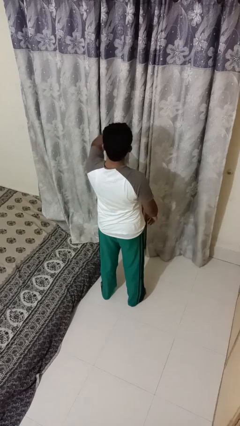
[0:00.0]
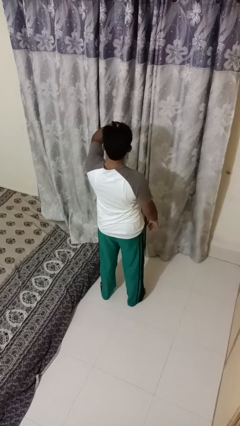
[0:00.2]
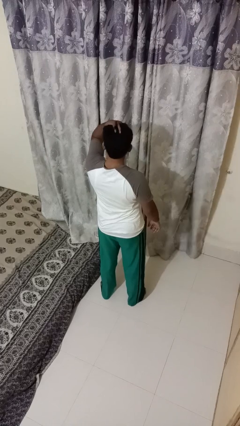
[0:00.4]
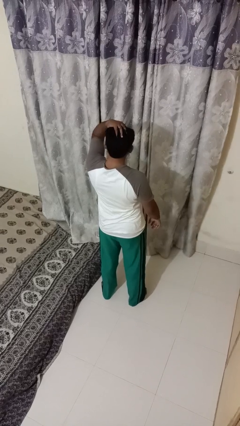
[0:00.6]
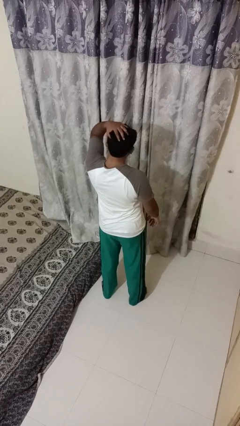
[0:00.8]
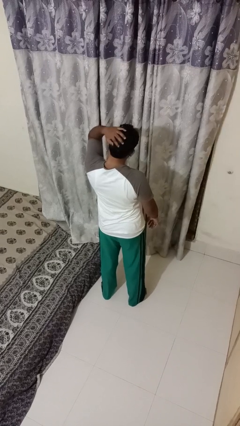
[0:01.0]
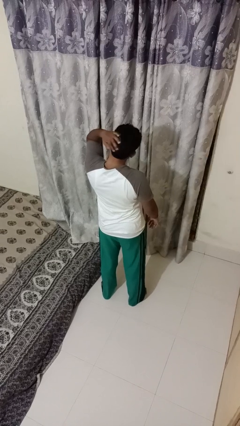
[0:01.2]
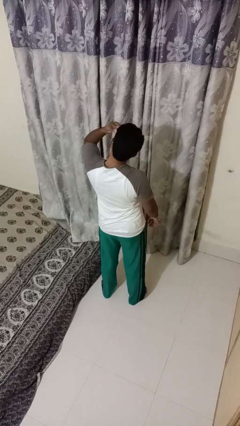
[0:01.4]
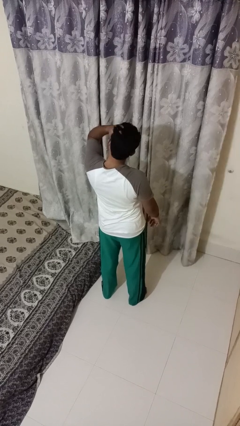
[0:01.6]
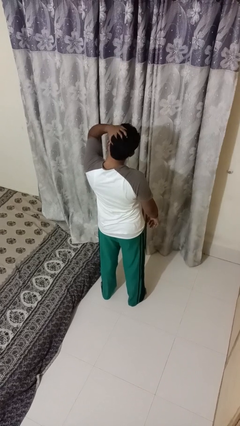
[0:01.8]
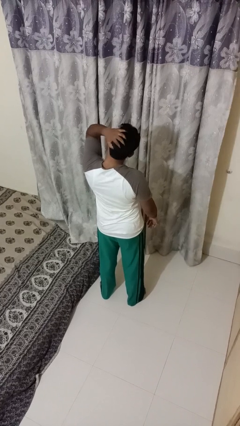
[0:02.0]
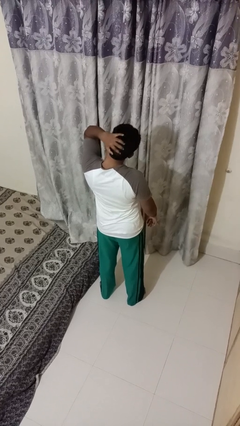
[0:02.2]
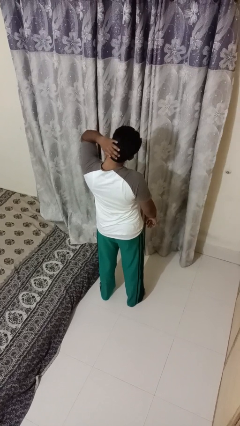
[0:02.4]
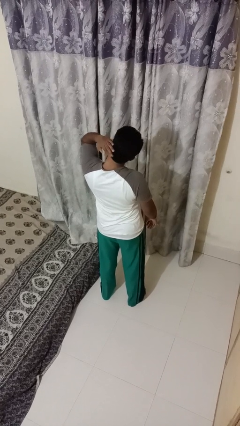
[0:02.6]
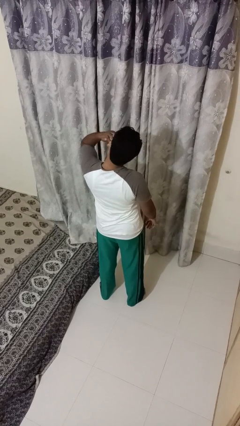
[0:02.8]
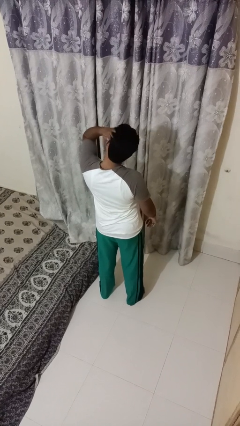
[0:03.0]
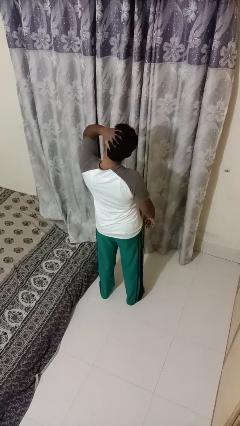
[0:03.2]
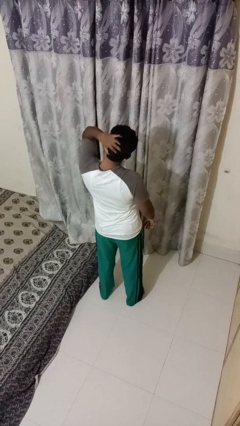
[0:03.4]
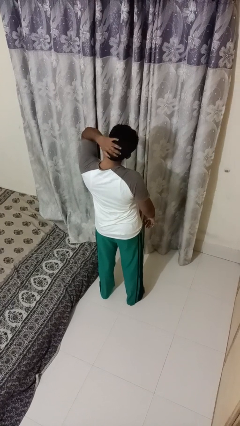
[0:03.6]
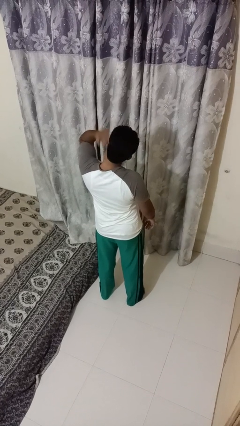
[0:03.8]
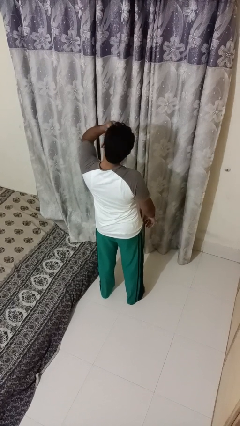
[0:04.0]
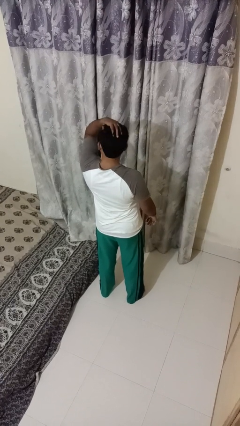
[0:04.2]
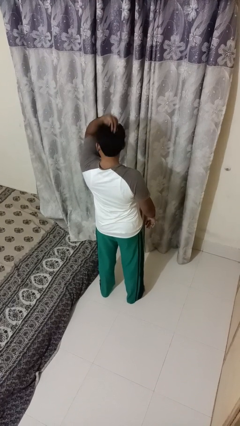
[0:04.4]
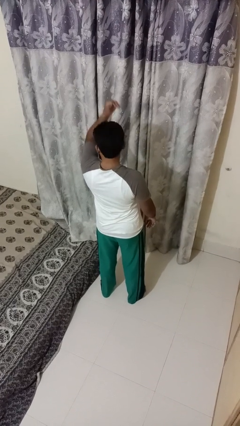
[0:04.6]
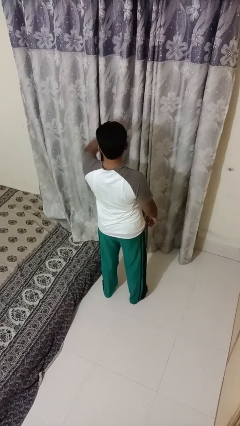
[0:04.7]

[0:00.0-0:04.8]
person strokes hair

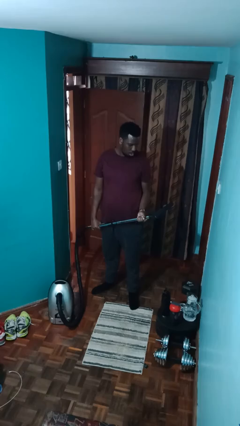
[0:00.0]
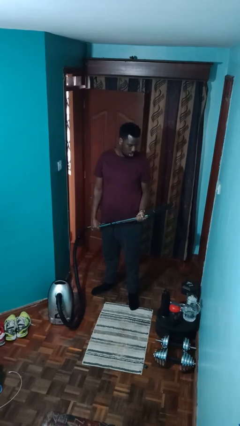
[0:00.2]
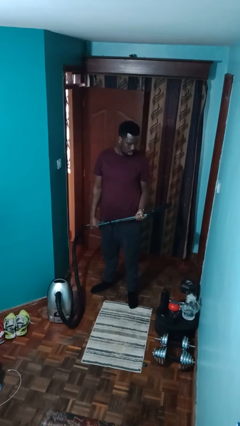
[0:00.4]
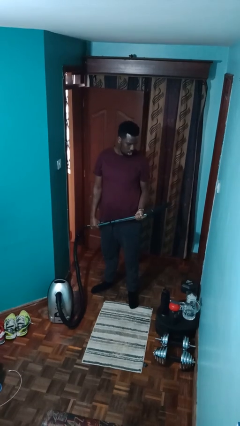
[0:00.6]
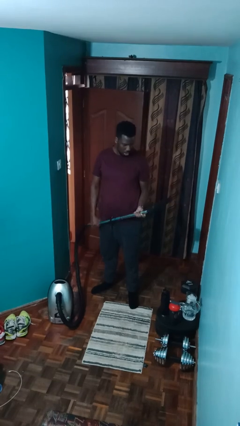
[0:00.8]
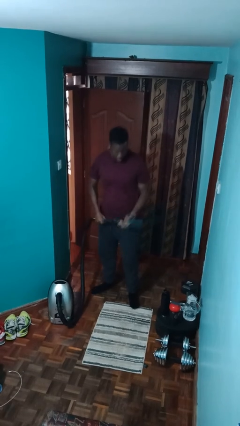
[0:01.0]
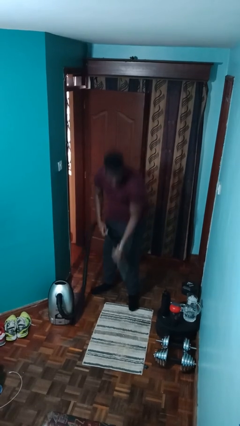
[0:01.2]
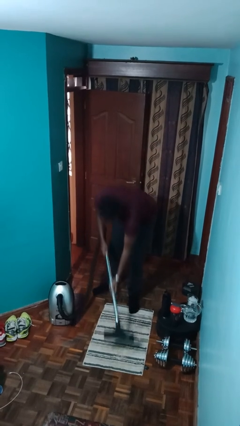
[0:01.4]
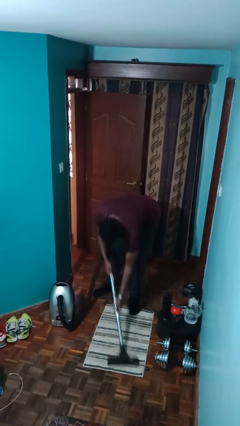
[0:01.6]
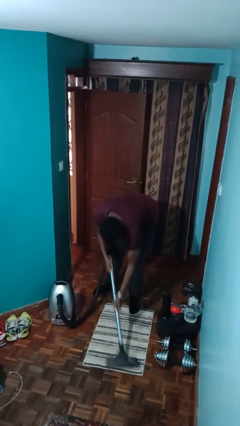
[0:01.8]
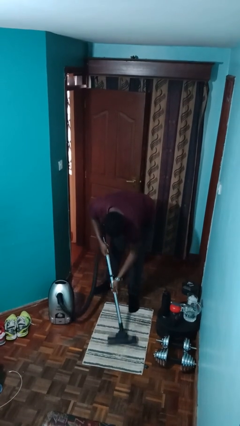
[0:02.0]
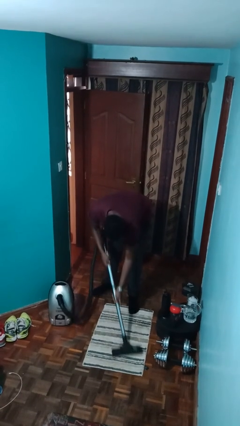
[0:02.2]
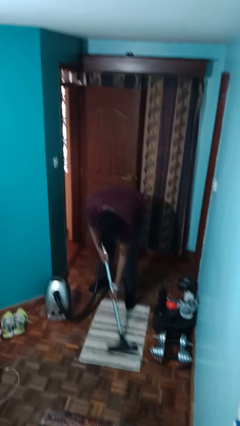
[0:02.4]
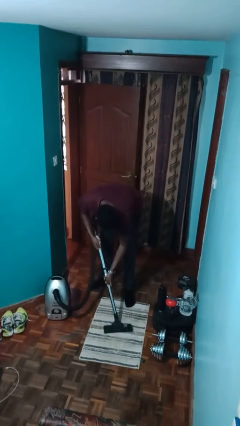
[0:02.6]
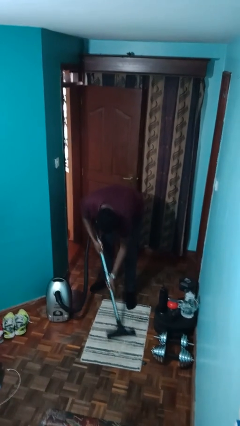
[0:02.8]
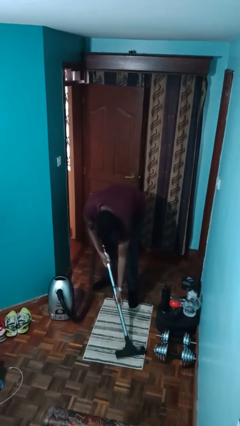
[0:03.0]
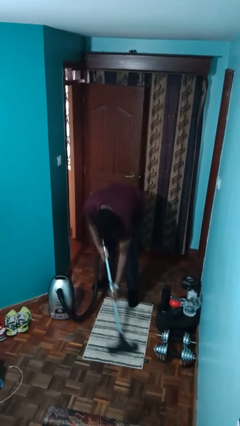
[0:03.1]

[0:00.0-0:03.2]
person vacuums carpet

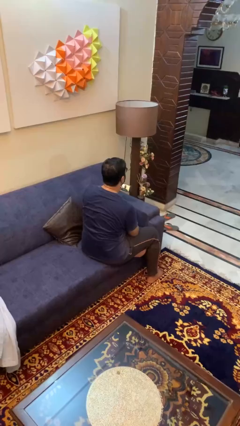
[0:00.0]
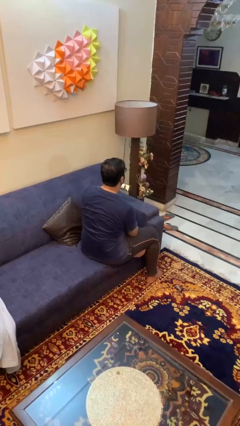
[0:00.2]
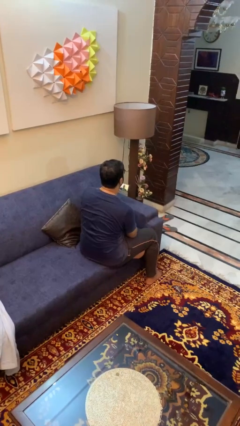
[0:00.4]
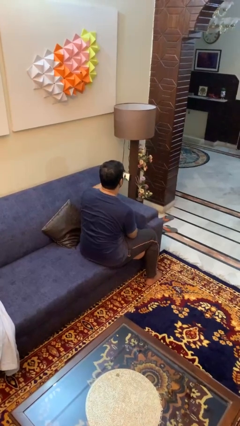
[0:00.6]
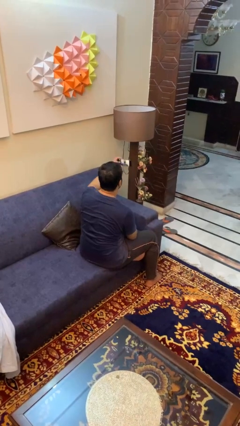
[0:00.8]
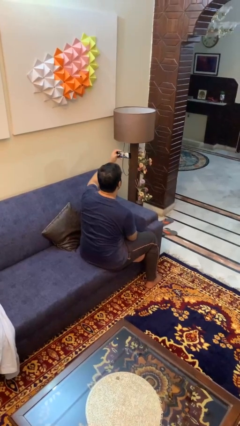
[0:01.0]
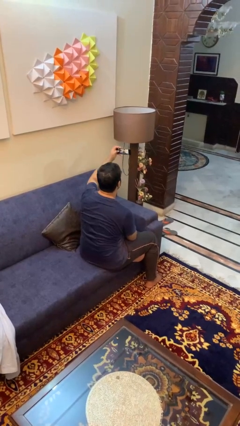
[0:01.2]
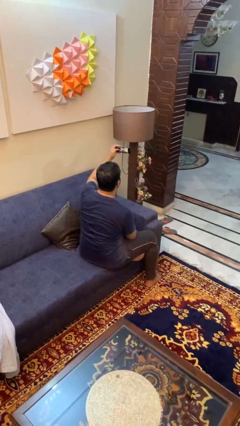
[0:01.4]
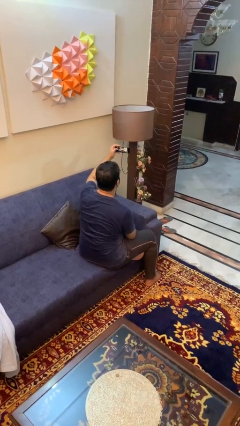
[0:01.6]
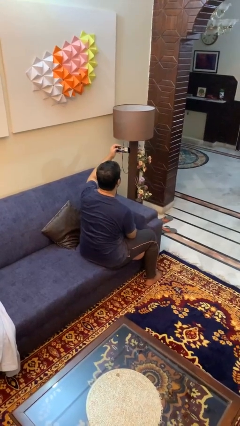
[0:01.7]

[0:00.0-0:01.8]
person takes selfie

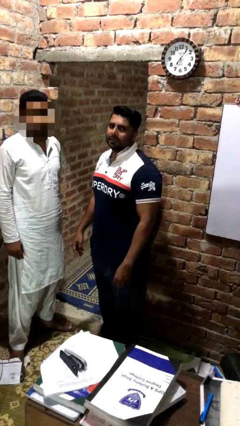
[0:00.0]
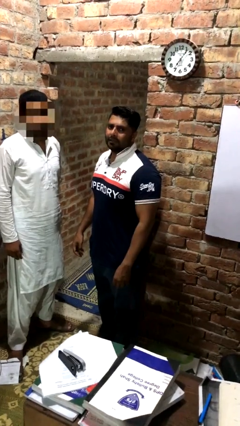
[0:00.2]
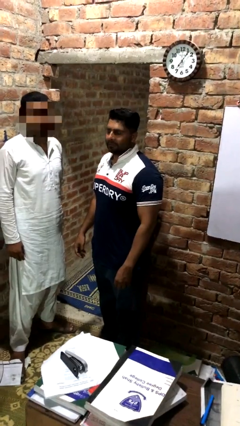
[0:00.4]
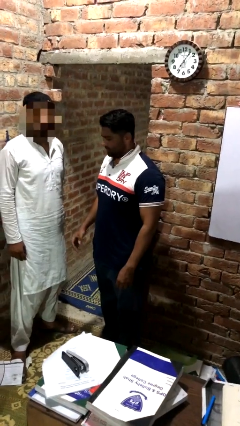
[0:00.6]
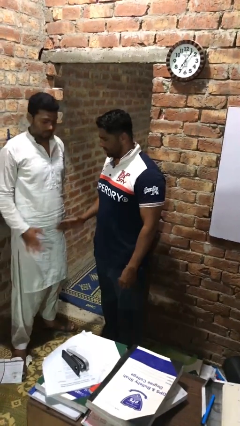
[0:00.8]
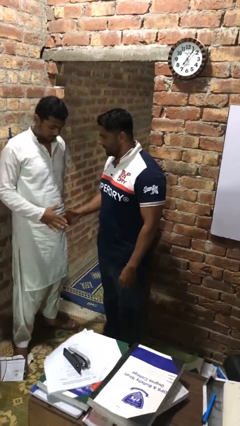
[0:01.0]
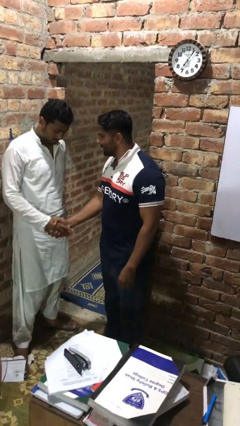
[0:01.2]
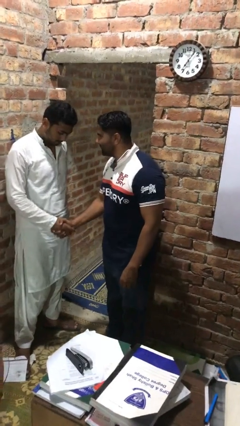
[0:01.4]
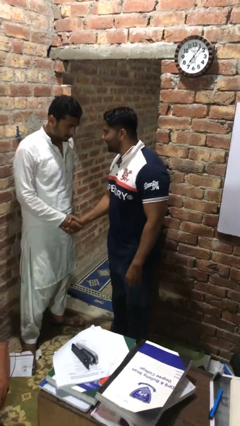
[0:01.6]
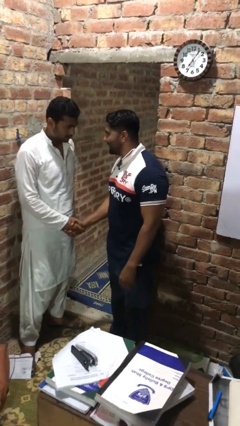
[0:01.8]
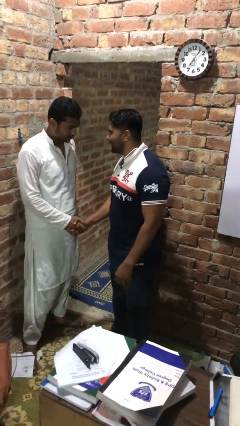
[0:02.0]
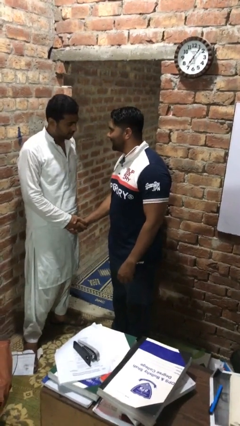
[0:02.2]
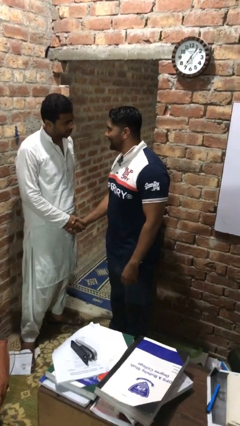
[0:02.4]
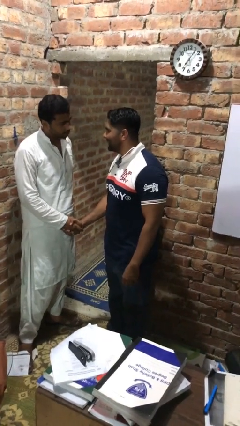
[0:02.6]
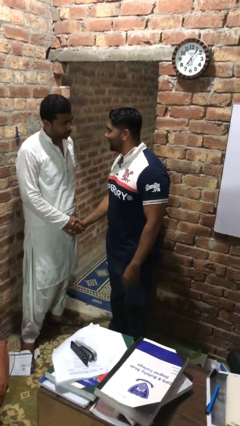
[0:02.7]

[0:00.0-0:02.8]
person shakes hand

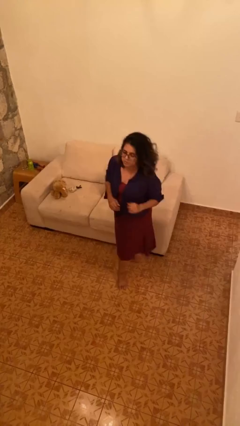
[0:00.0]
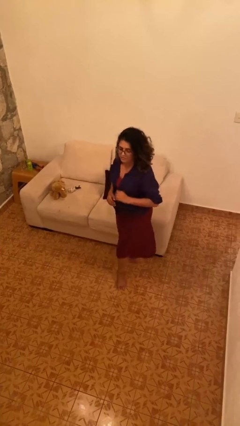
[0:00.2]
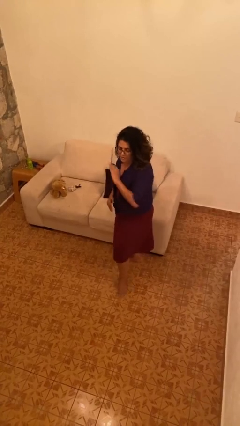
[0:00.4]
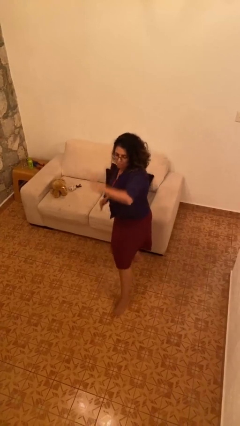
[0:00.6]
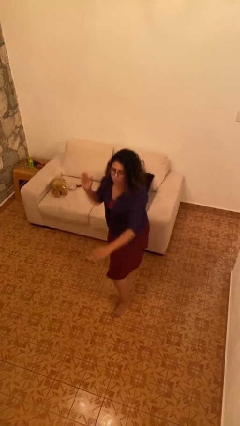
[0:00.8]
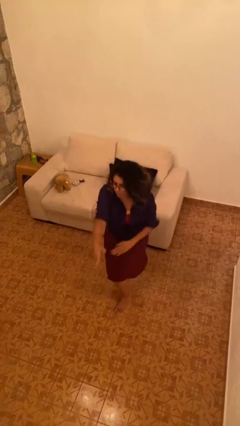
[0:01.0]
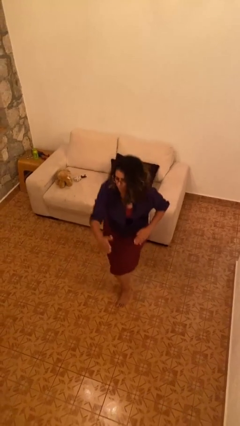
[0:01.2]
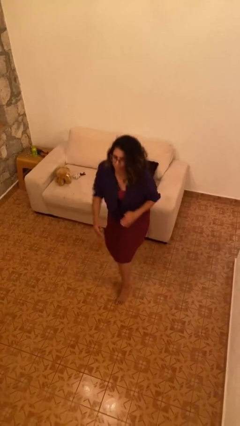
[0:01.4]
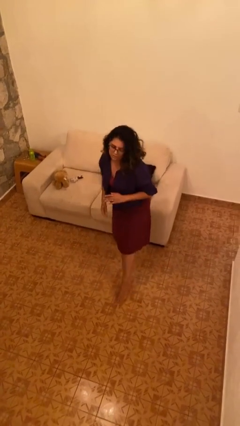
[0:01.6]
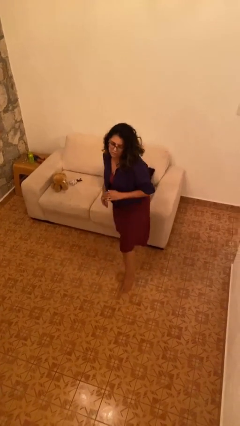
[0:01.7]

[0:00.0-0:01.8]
person karate chop

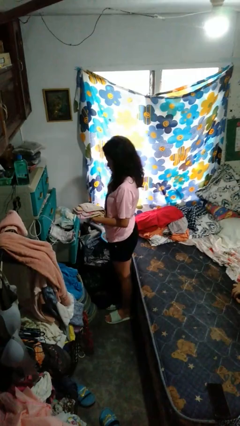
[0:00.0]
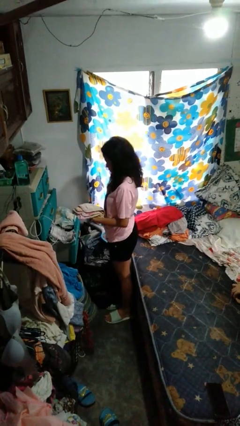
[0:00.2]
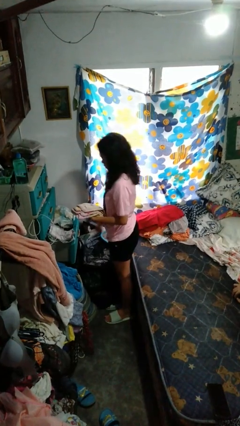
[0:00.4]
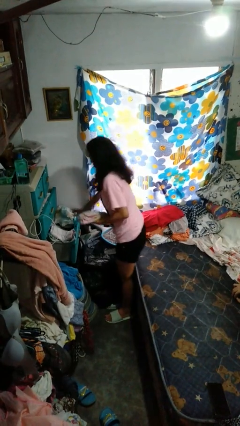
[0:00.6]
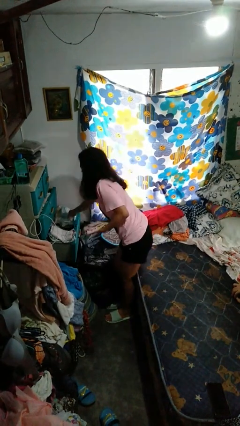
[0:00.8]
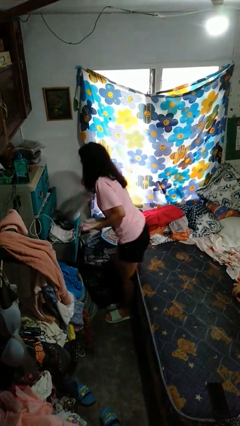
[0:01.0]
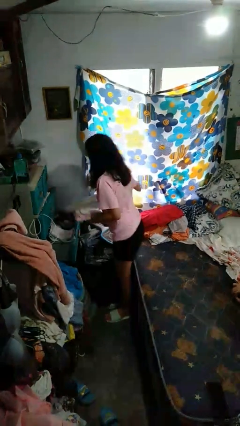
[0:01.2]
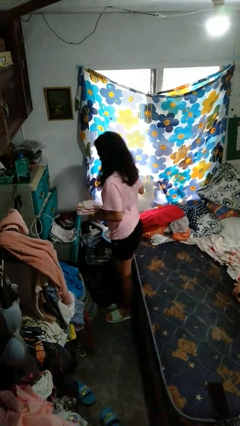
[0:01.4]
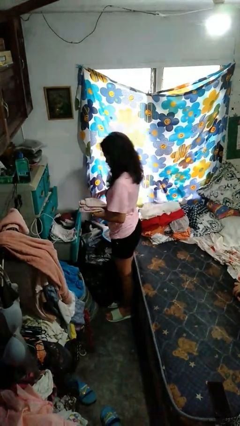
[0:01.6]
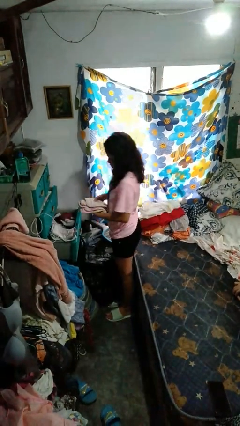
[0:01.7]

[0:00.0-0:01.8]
person takes clothes from dresser

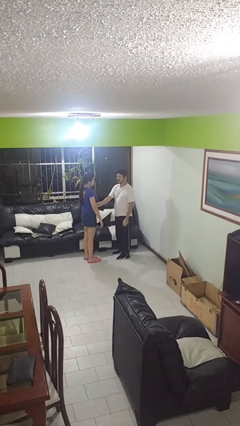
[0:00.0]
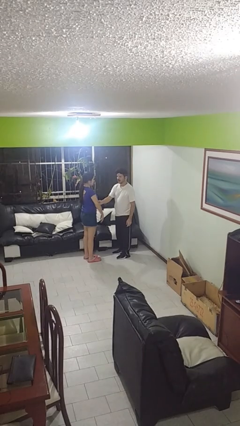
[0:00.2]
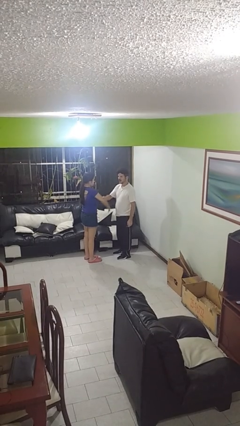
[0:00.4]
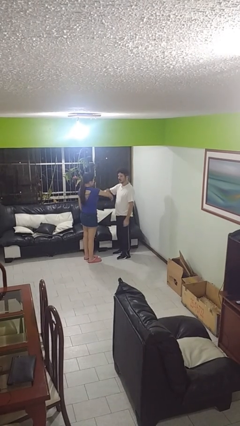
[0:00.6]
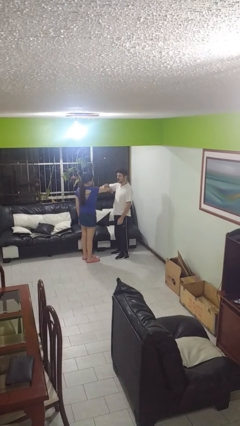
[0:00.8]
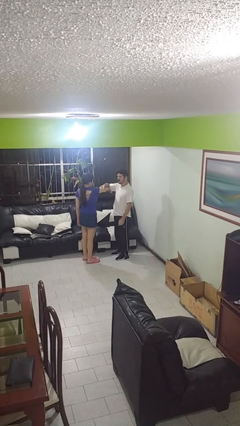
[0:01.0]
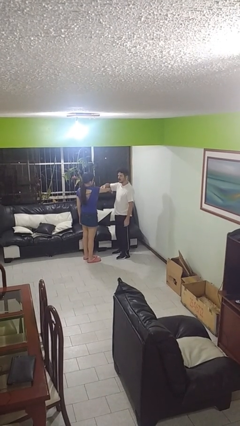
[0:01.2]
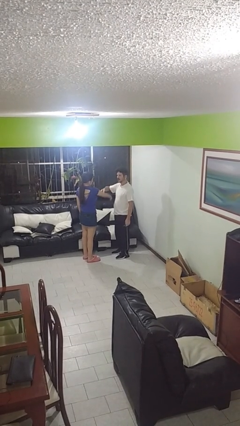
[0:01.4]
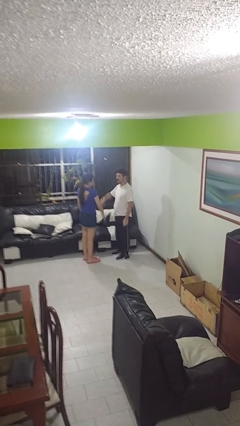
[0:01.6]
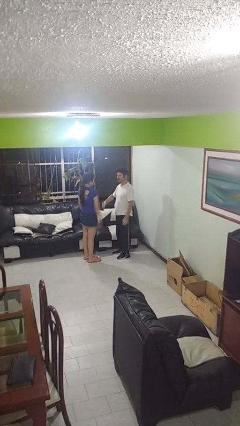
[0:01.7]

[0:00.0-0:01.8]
person grabs person by bicep
